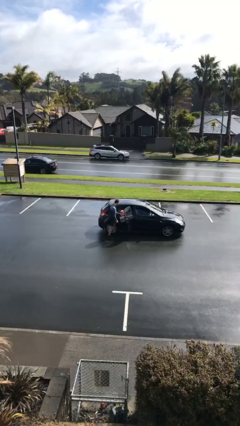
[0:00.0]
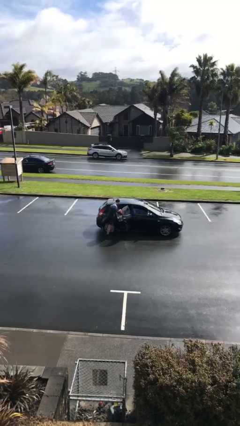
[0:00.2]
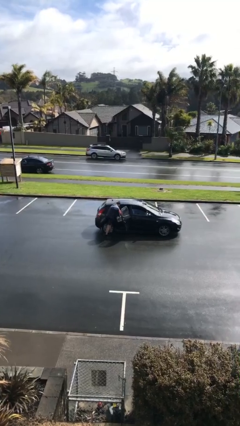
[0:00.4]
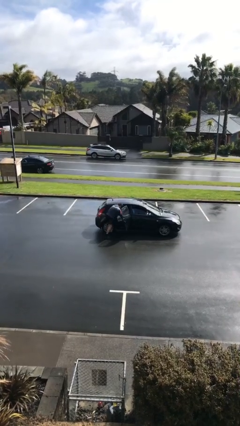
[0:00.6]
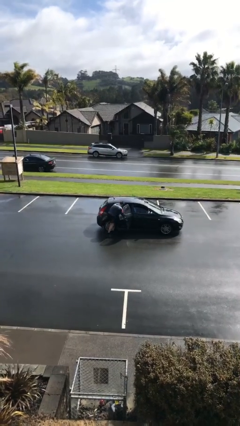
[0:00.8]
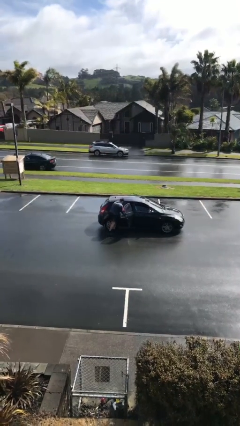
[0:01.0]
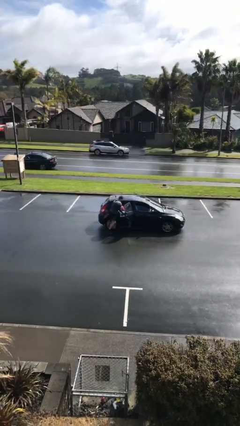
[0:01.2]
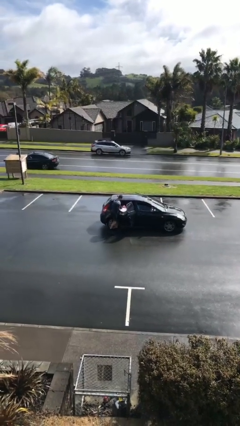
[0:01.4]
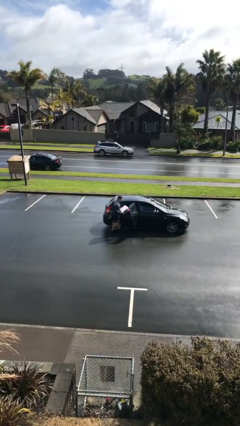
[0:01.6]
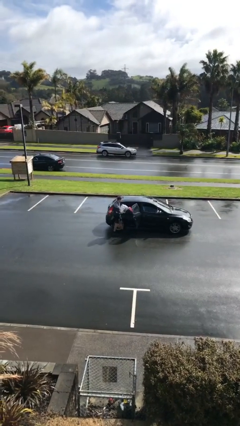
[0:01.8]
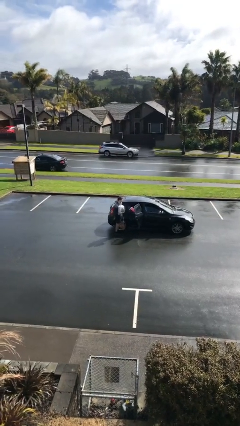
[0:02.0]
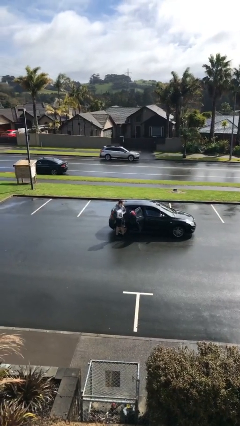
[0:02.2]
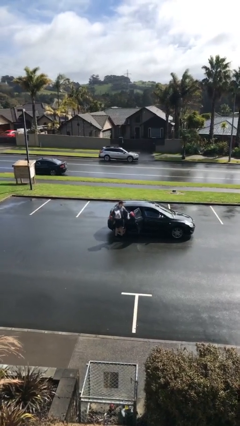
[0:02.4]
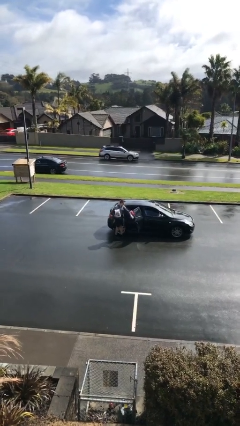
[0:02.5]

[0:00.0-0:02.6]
person unloads car

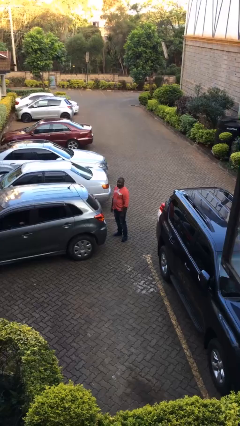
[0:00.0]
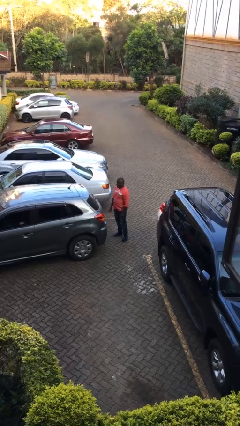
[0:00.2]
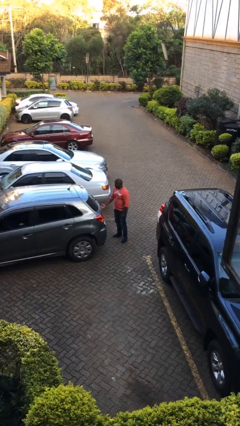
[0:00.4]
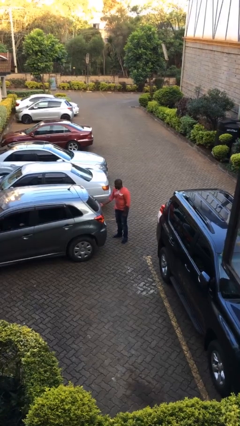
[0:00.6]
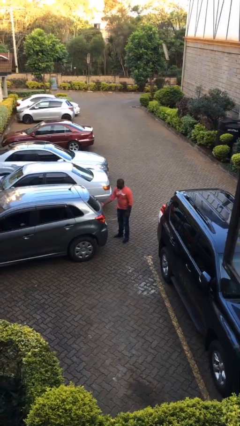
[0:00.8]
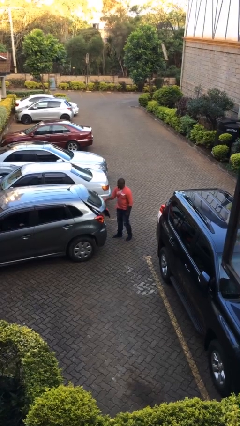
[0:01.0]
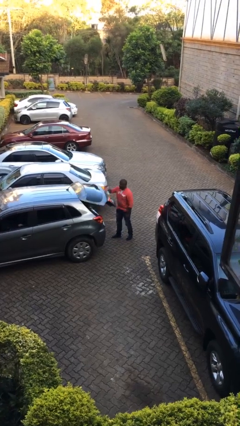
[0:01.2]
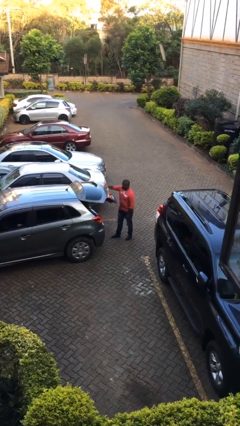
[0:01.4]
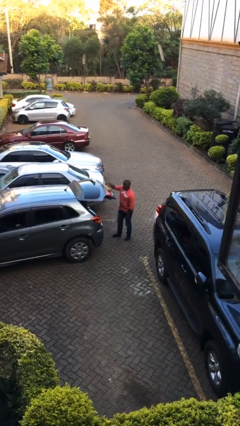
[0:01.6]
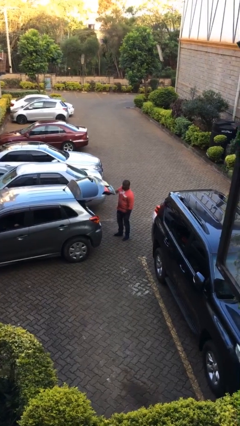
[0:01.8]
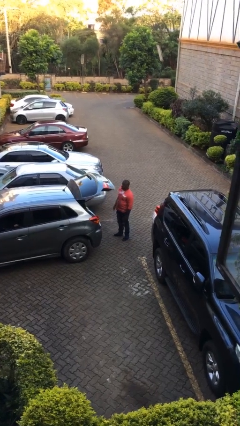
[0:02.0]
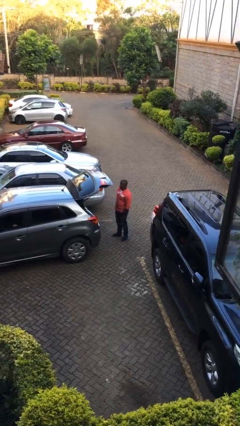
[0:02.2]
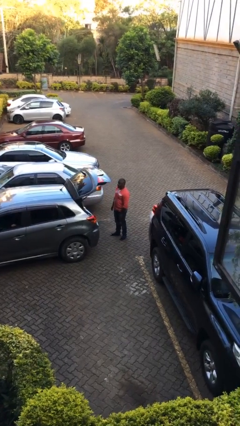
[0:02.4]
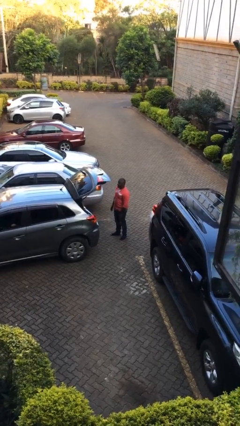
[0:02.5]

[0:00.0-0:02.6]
person opens car trunk

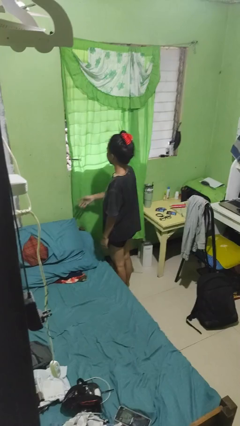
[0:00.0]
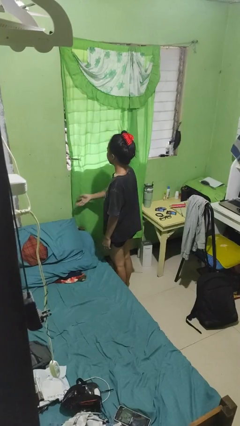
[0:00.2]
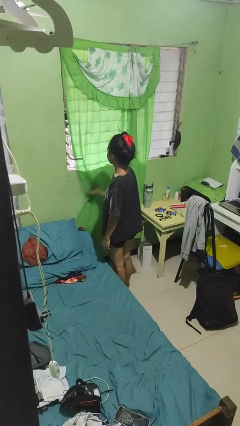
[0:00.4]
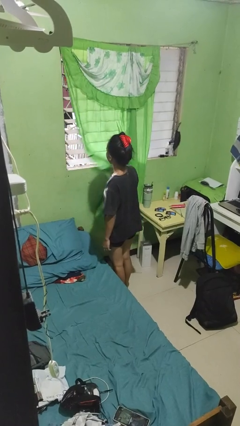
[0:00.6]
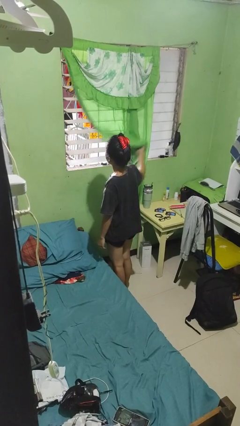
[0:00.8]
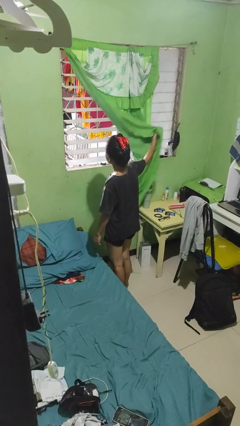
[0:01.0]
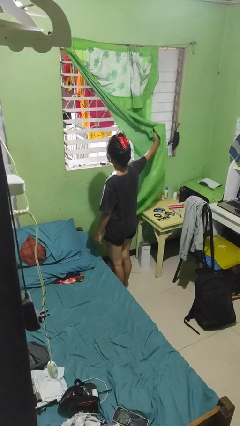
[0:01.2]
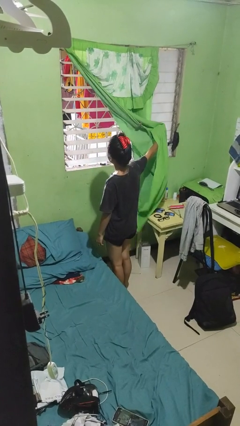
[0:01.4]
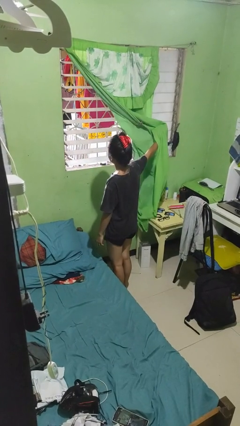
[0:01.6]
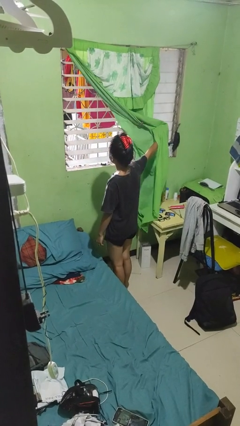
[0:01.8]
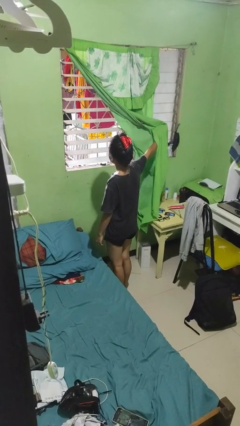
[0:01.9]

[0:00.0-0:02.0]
person opens curtains

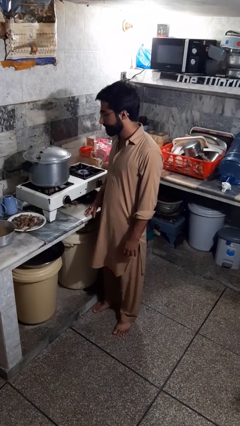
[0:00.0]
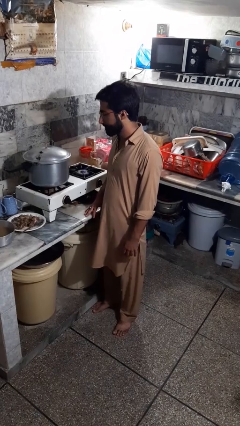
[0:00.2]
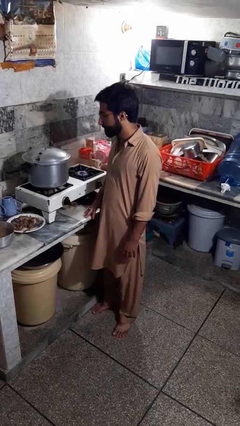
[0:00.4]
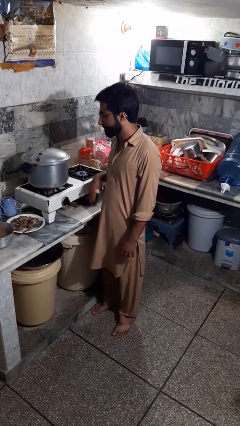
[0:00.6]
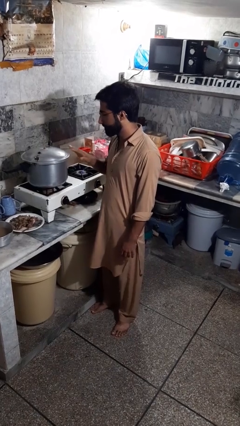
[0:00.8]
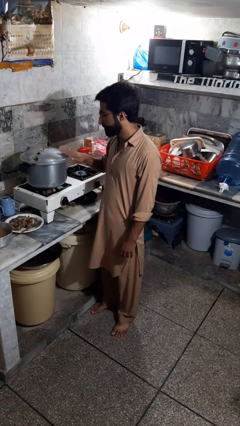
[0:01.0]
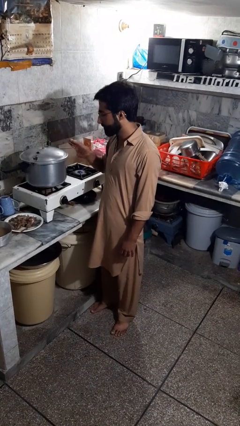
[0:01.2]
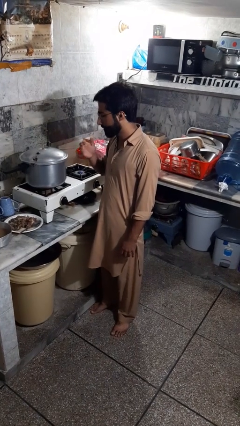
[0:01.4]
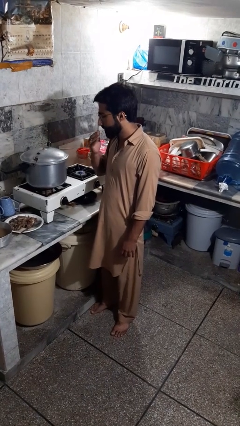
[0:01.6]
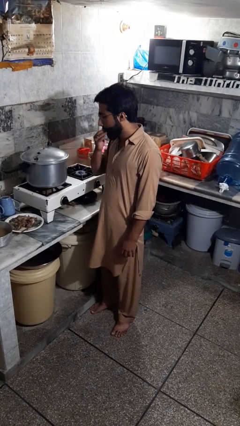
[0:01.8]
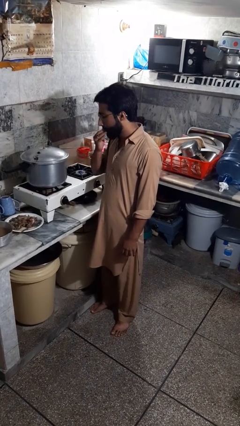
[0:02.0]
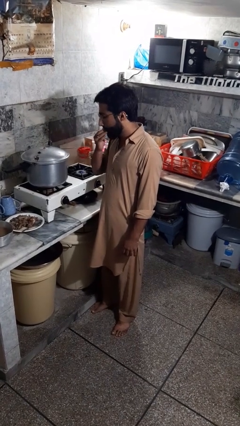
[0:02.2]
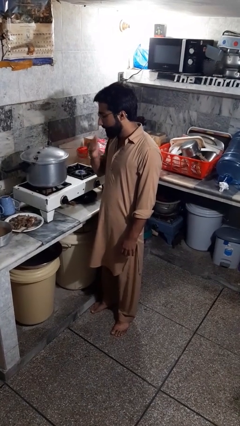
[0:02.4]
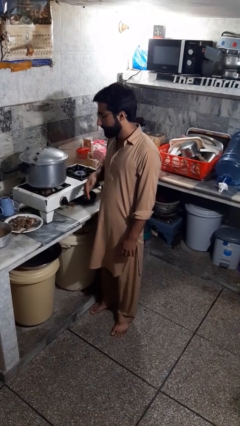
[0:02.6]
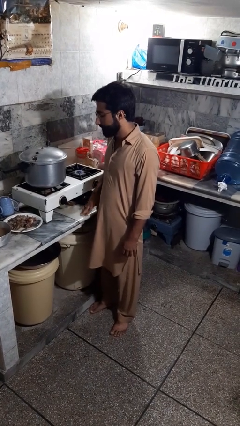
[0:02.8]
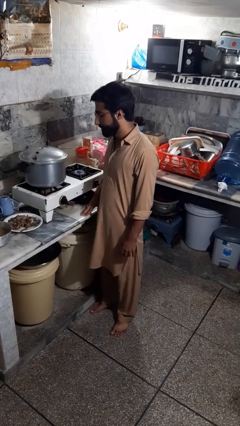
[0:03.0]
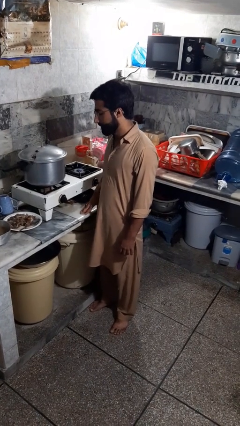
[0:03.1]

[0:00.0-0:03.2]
person burns hand

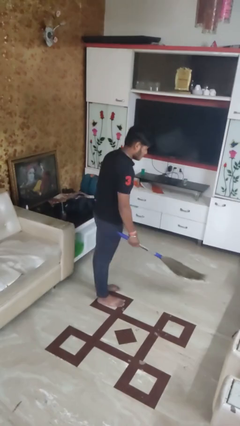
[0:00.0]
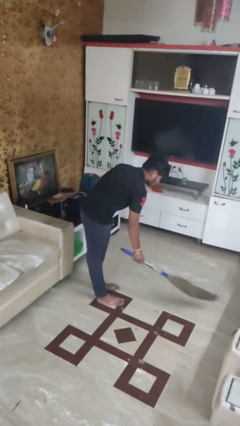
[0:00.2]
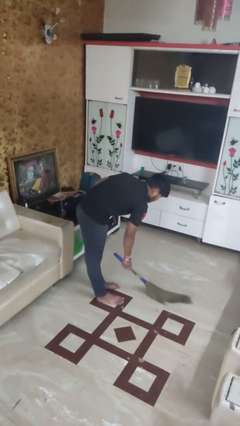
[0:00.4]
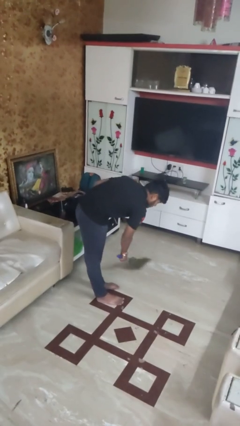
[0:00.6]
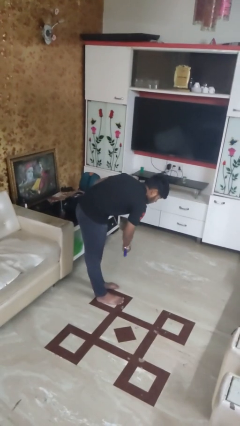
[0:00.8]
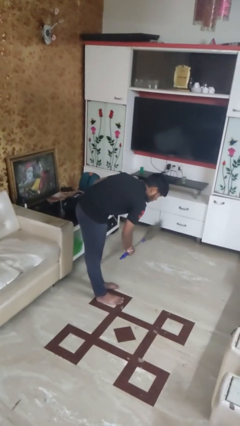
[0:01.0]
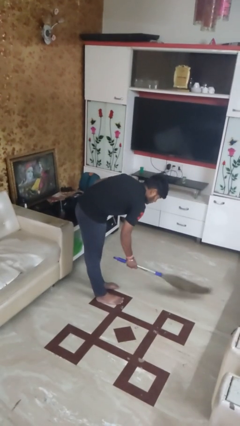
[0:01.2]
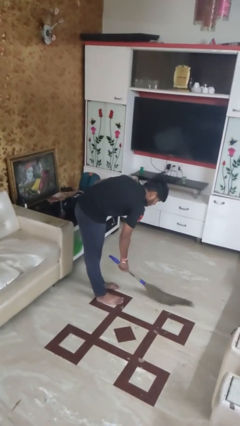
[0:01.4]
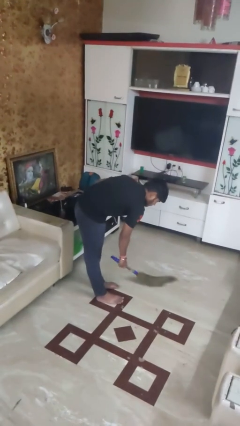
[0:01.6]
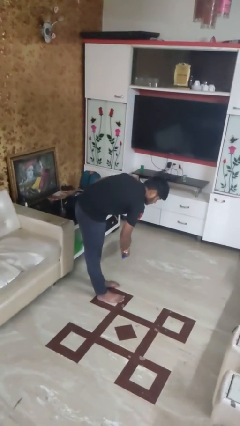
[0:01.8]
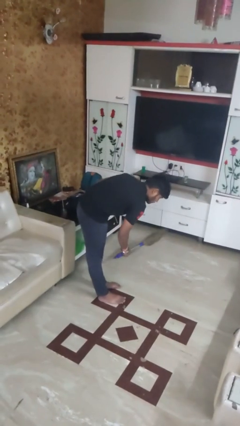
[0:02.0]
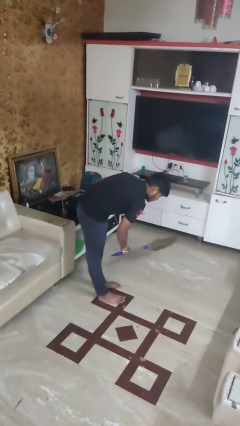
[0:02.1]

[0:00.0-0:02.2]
person sweeps floor

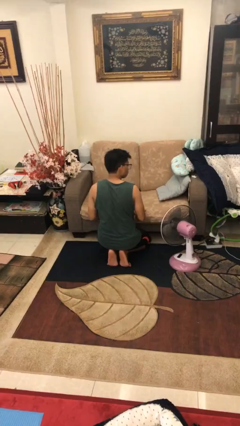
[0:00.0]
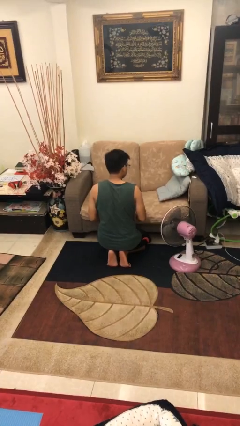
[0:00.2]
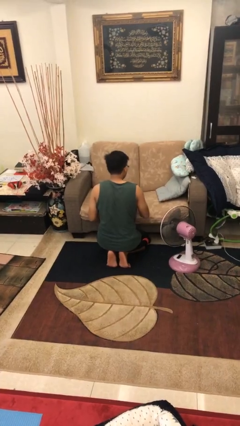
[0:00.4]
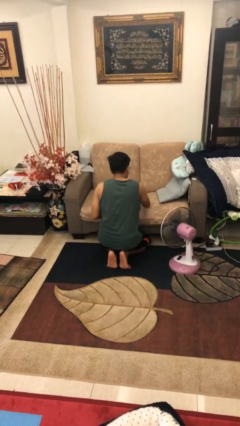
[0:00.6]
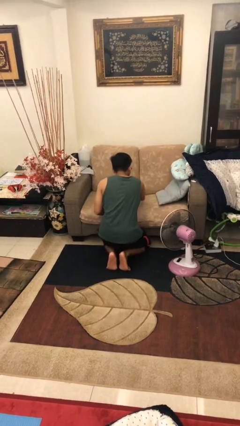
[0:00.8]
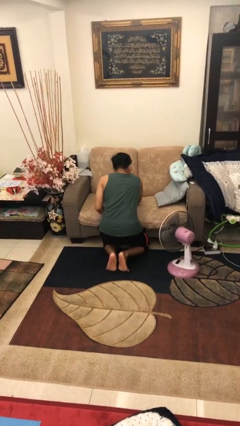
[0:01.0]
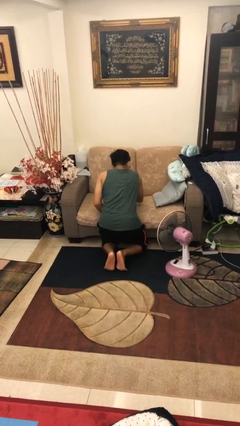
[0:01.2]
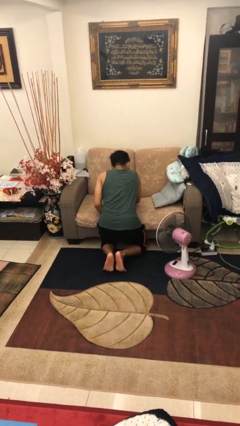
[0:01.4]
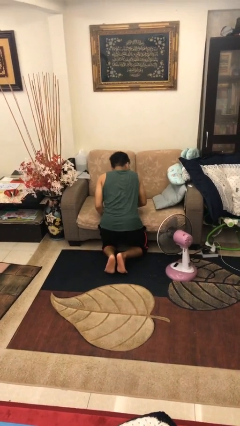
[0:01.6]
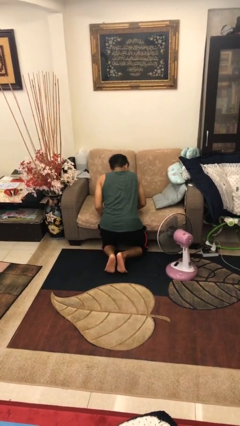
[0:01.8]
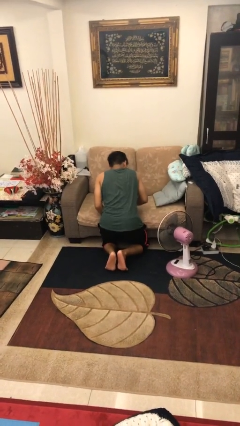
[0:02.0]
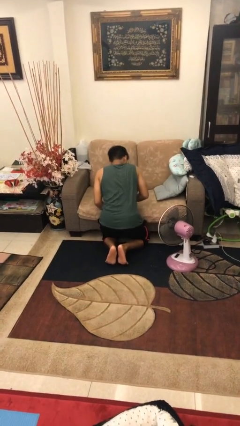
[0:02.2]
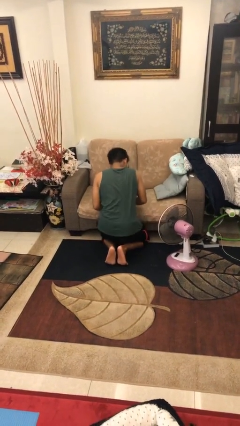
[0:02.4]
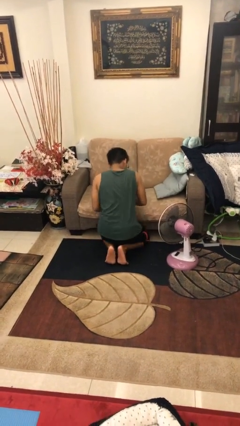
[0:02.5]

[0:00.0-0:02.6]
person searches in couch

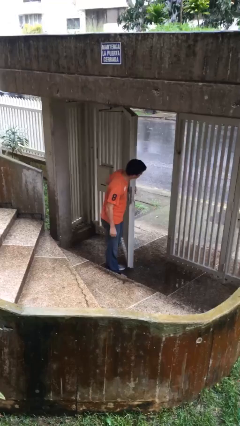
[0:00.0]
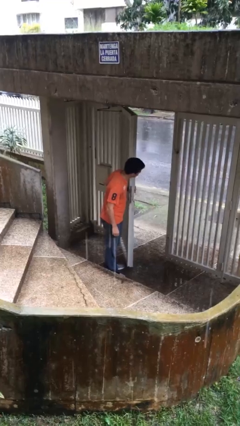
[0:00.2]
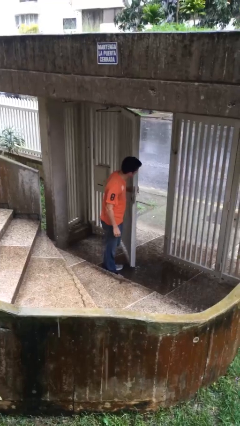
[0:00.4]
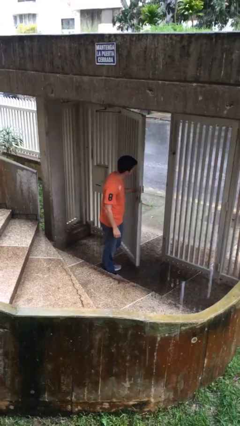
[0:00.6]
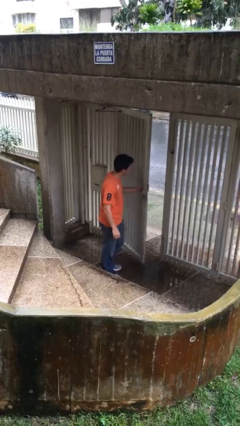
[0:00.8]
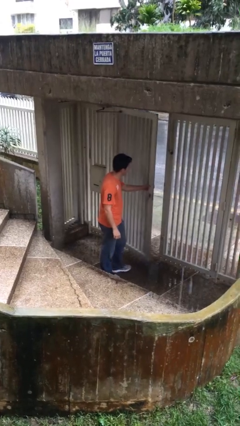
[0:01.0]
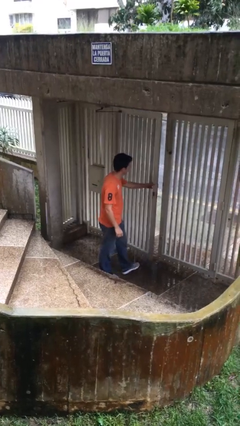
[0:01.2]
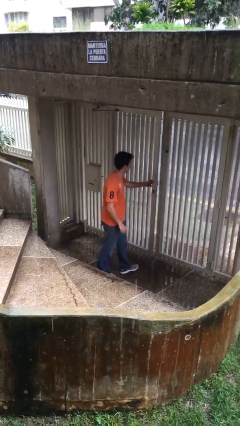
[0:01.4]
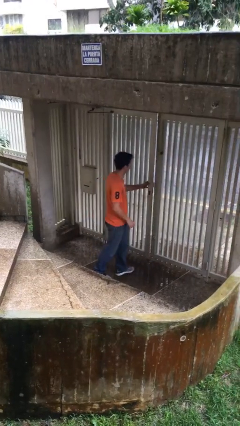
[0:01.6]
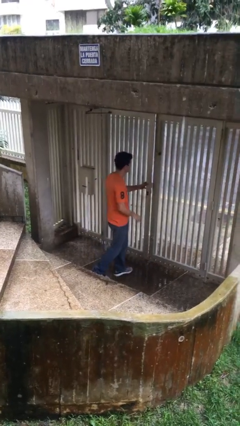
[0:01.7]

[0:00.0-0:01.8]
person closes facility door
